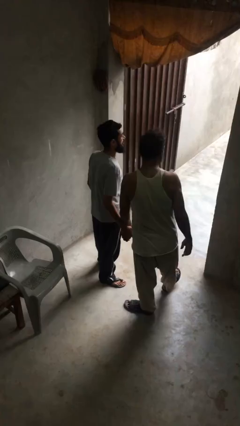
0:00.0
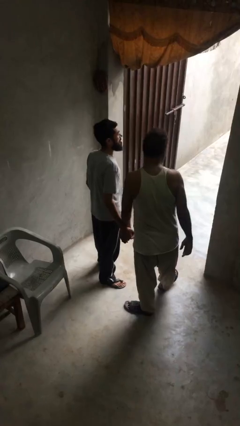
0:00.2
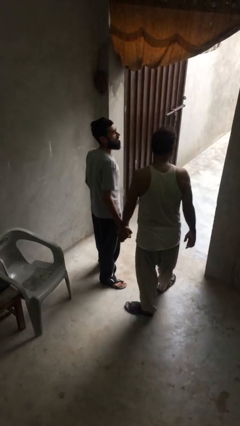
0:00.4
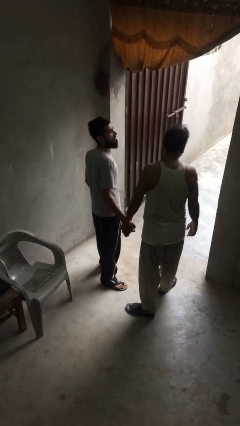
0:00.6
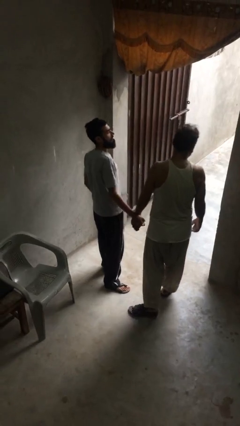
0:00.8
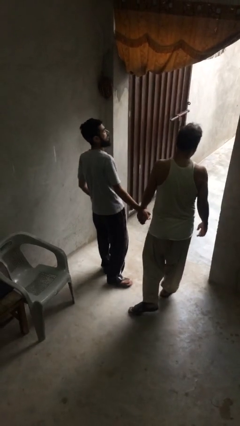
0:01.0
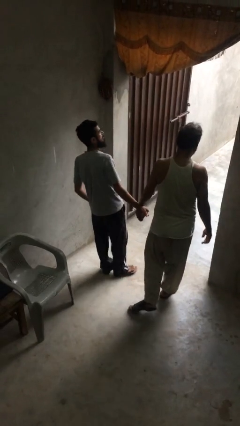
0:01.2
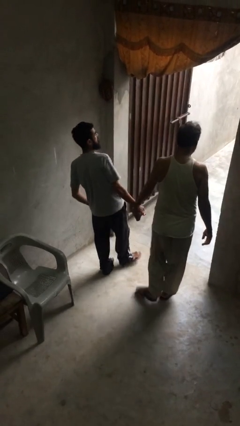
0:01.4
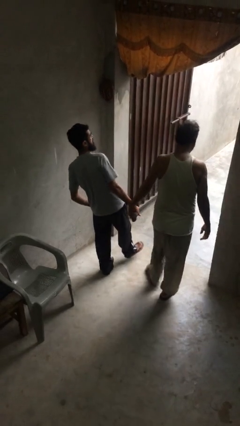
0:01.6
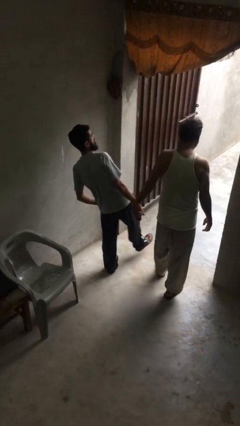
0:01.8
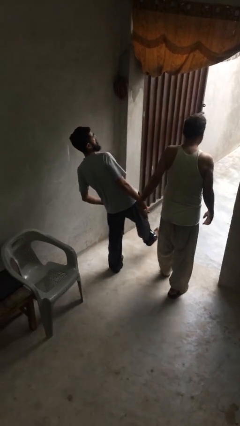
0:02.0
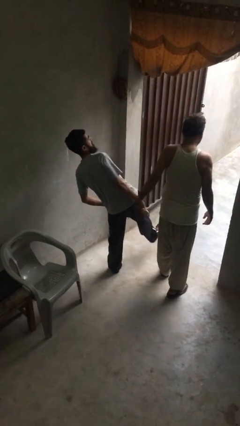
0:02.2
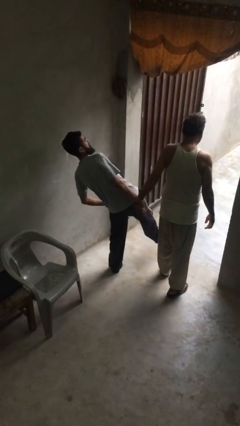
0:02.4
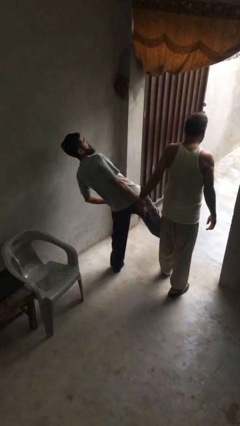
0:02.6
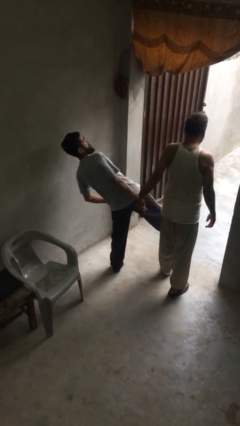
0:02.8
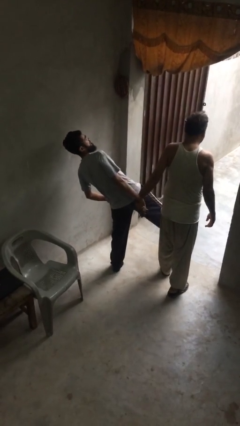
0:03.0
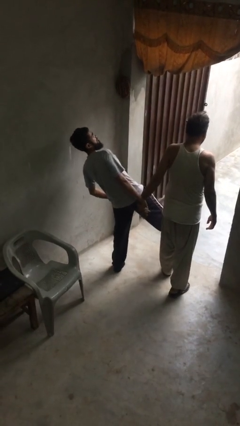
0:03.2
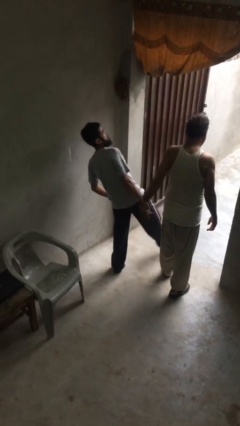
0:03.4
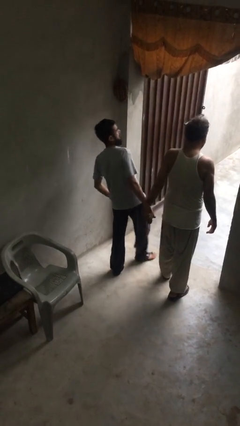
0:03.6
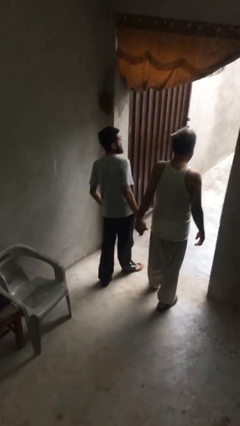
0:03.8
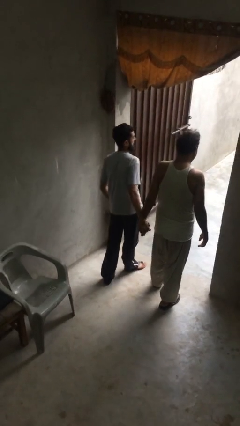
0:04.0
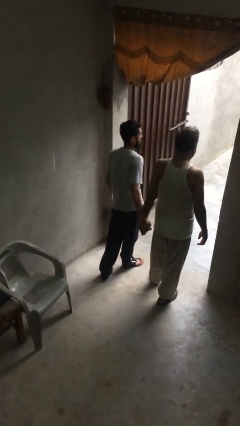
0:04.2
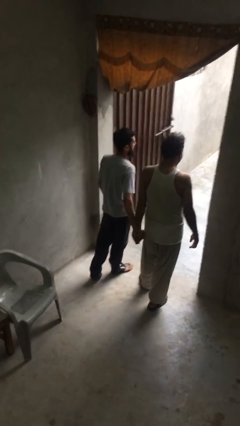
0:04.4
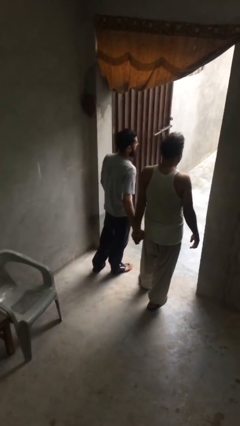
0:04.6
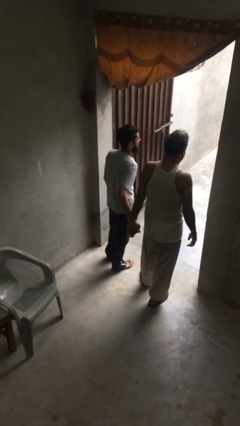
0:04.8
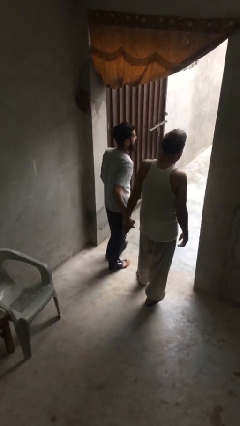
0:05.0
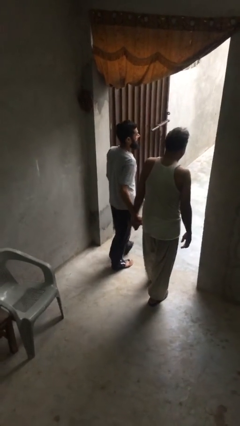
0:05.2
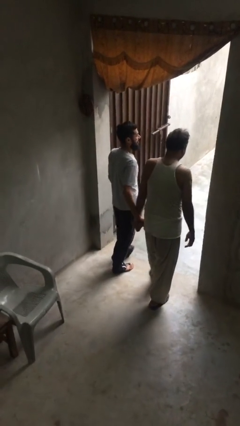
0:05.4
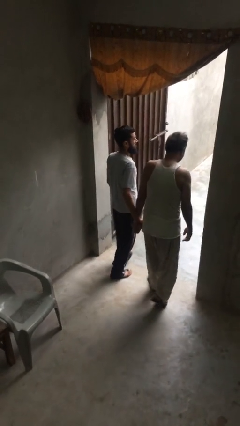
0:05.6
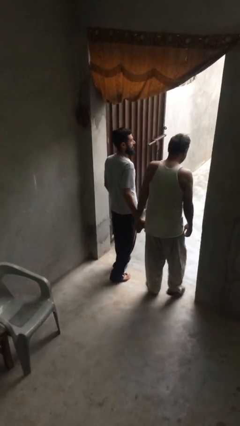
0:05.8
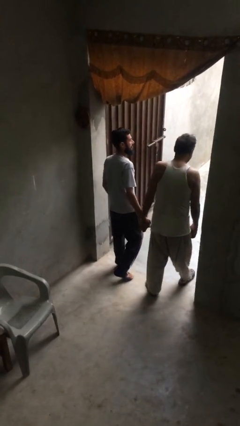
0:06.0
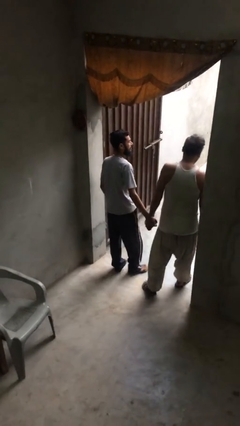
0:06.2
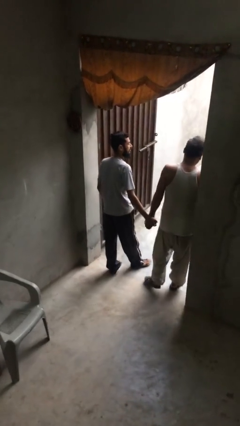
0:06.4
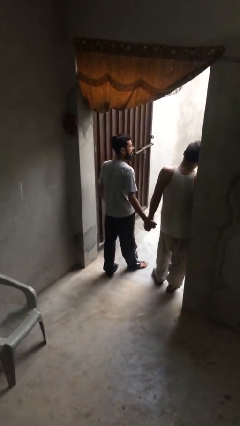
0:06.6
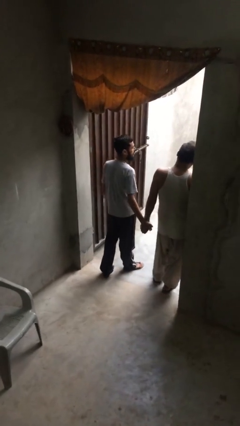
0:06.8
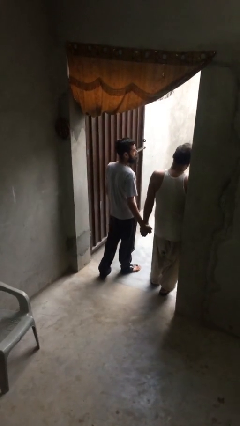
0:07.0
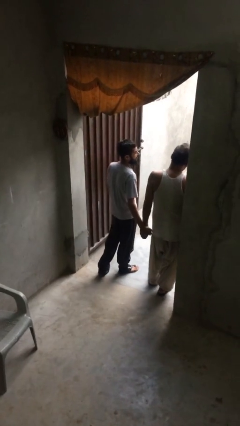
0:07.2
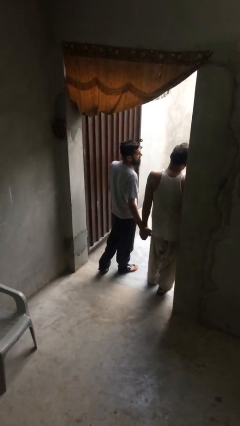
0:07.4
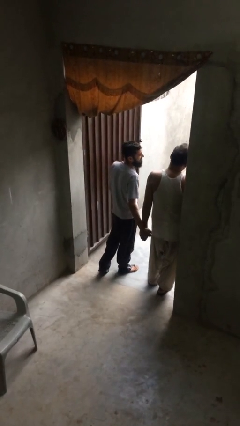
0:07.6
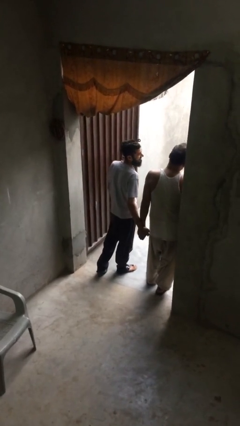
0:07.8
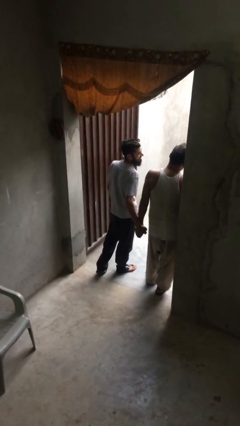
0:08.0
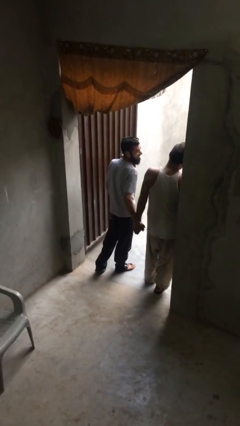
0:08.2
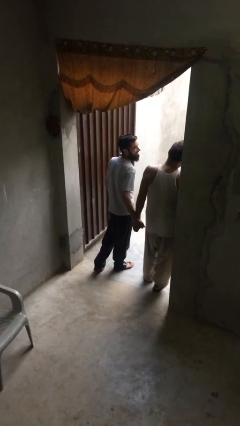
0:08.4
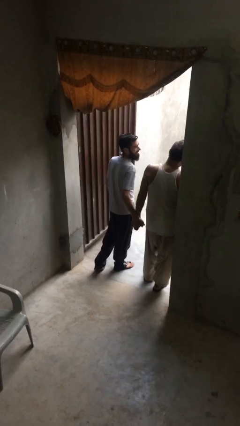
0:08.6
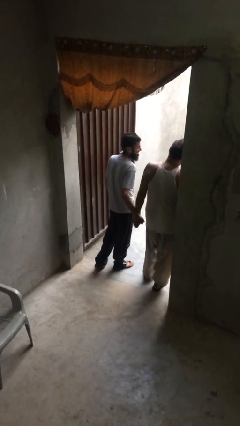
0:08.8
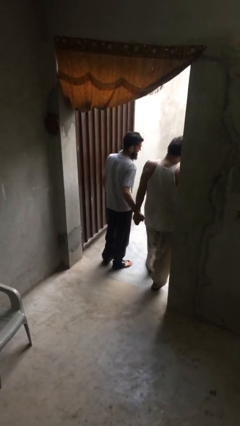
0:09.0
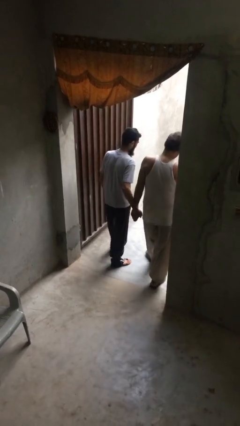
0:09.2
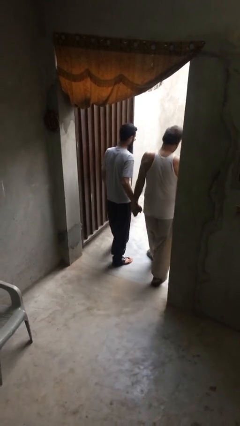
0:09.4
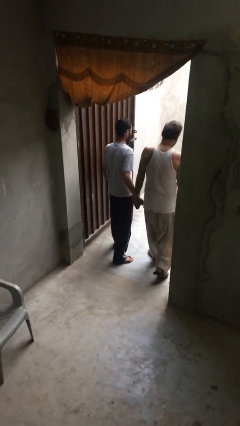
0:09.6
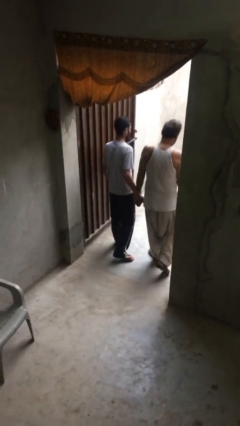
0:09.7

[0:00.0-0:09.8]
person holds hand

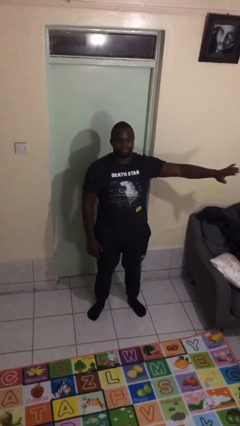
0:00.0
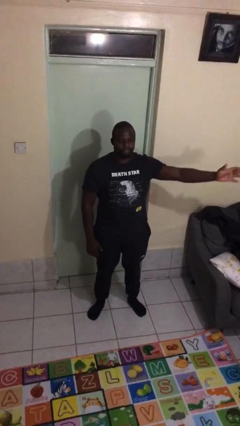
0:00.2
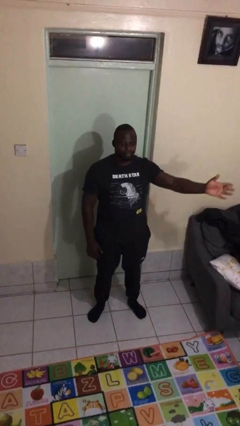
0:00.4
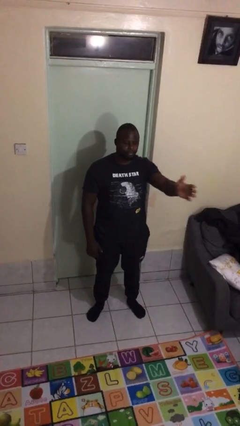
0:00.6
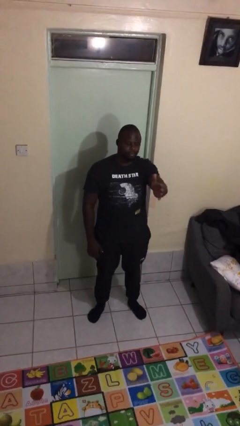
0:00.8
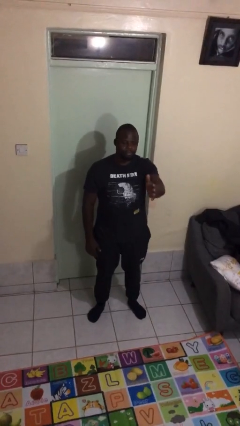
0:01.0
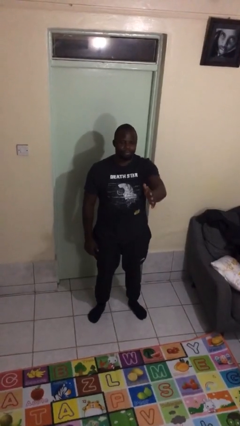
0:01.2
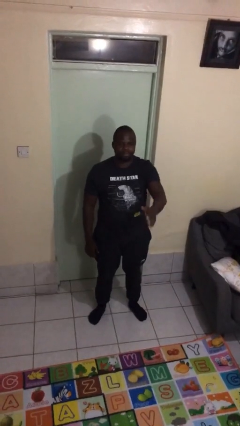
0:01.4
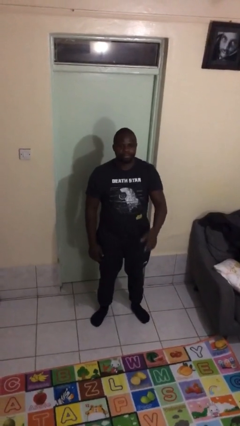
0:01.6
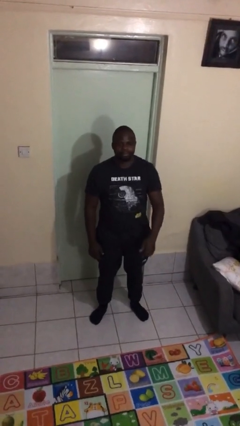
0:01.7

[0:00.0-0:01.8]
person gestures swipe right

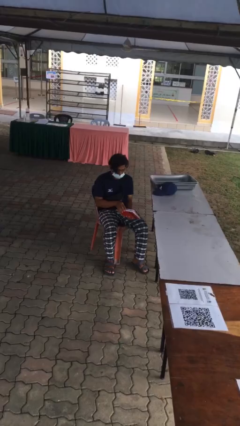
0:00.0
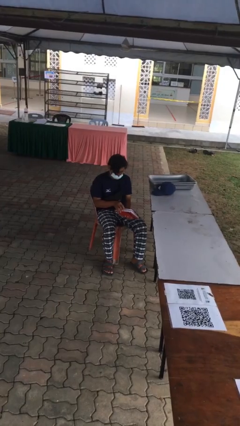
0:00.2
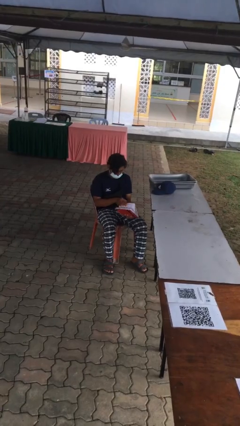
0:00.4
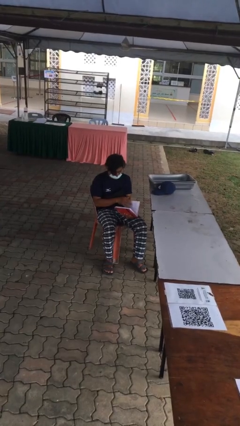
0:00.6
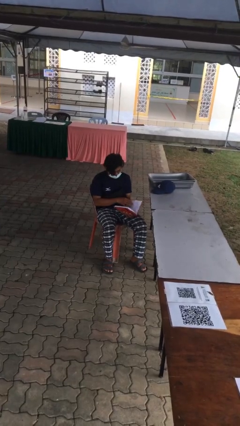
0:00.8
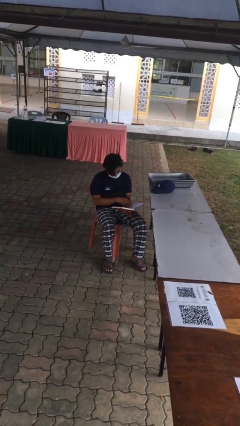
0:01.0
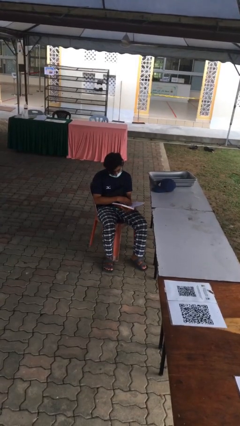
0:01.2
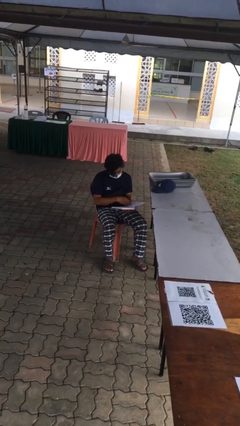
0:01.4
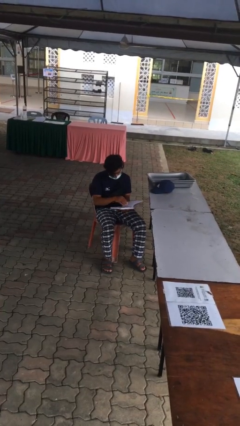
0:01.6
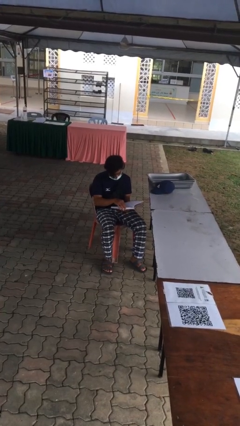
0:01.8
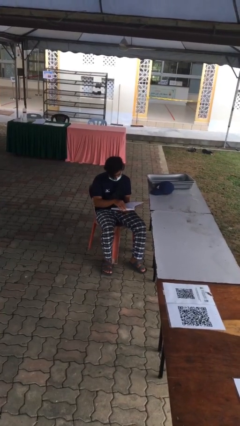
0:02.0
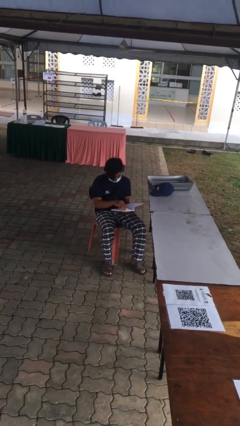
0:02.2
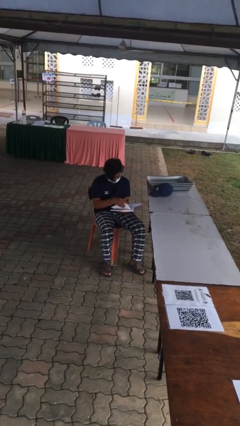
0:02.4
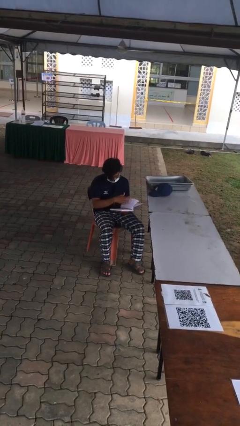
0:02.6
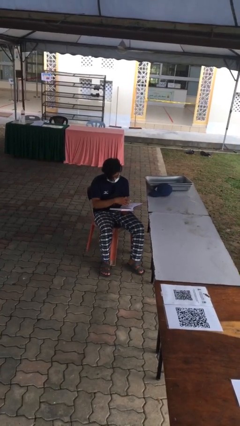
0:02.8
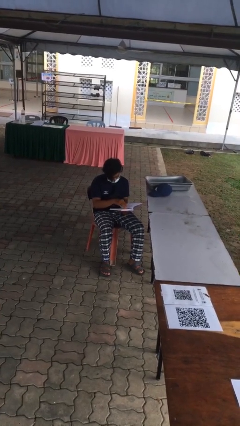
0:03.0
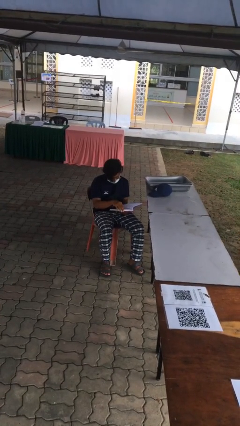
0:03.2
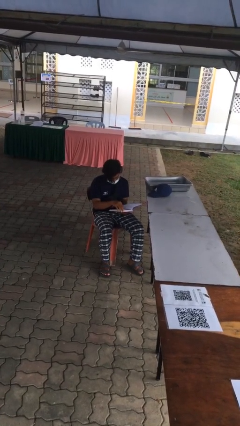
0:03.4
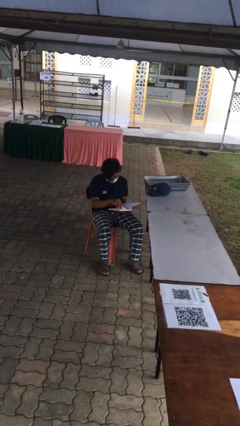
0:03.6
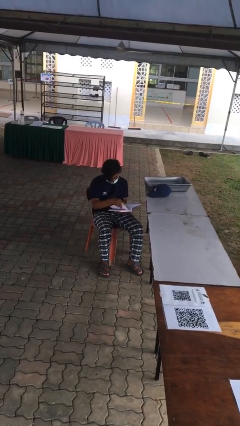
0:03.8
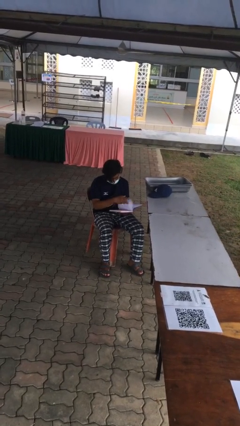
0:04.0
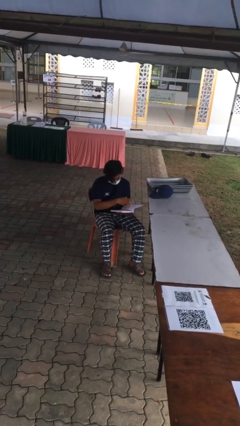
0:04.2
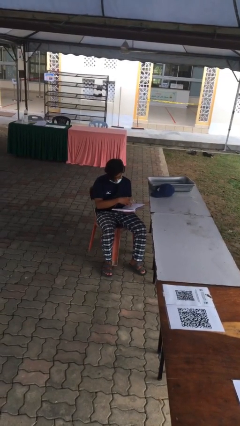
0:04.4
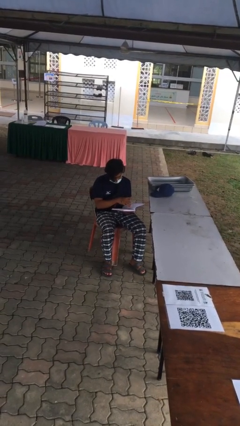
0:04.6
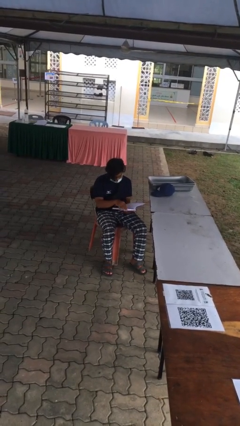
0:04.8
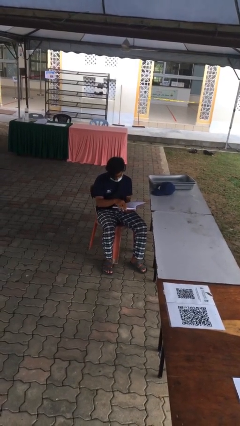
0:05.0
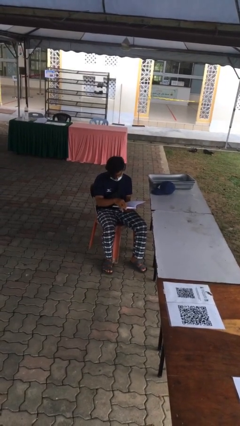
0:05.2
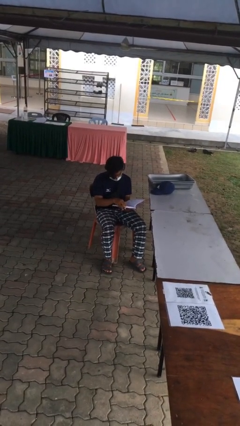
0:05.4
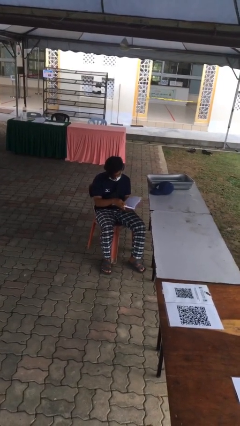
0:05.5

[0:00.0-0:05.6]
person reads document

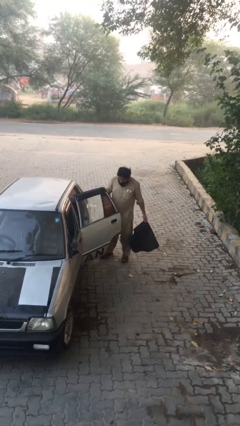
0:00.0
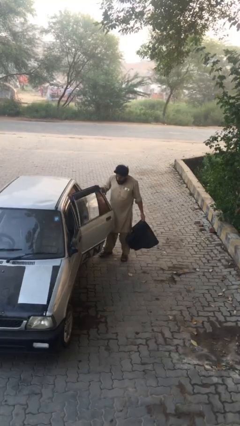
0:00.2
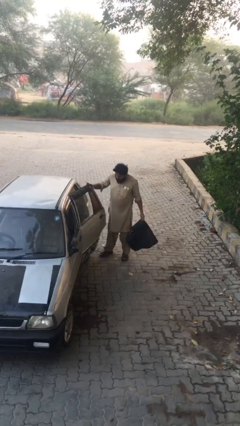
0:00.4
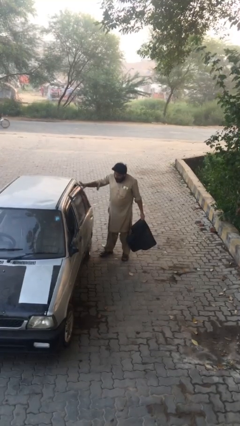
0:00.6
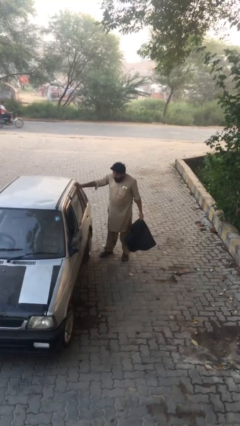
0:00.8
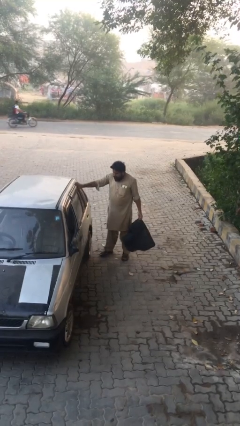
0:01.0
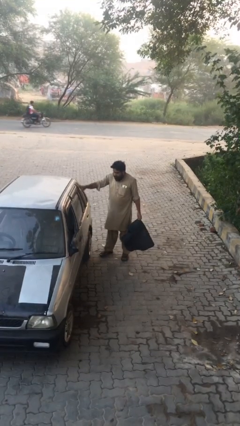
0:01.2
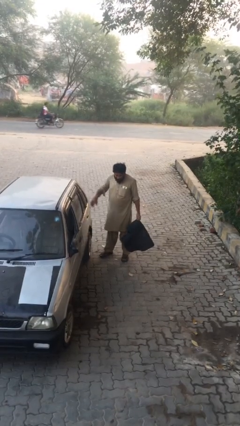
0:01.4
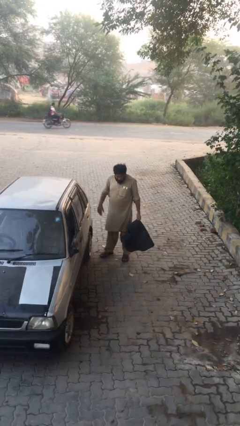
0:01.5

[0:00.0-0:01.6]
person closes car door
